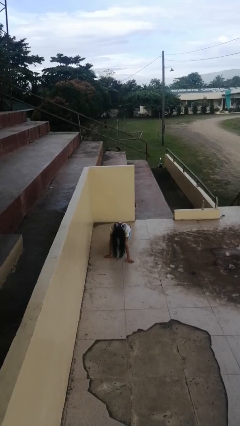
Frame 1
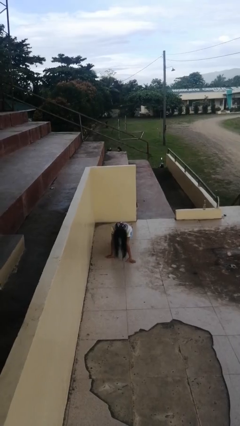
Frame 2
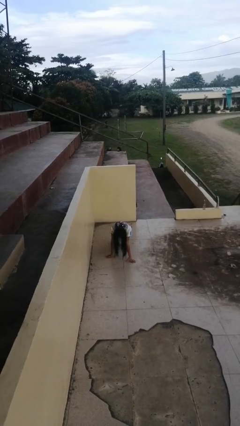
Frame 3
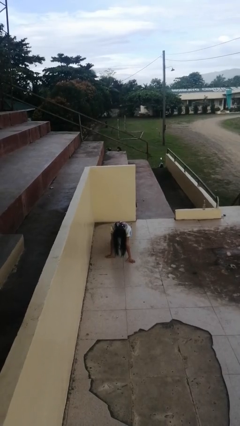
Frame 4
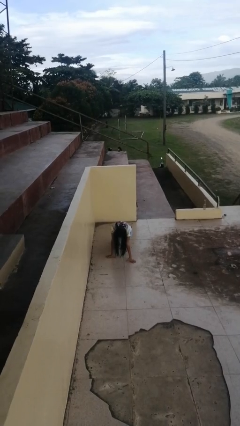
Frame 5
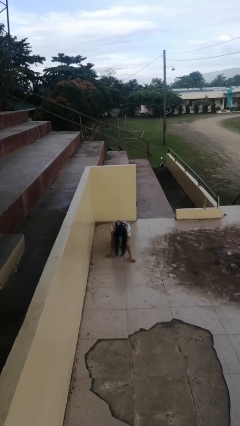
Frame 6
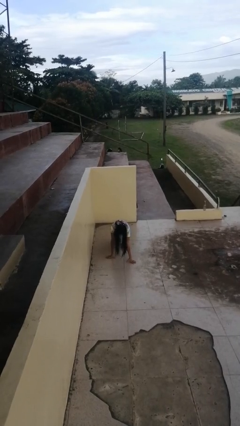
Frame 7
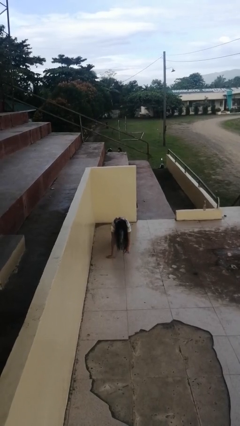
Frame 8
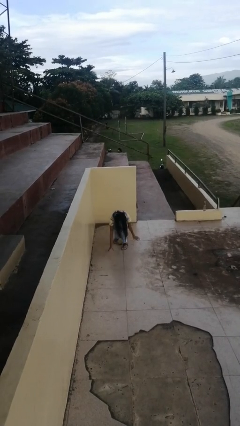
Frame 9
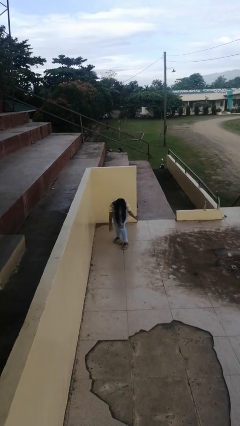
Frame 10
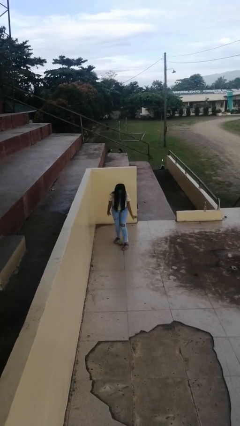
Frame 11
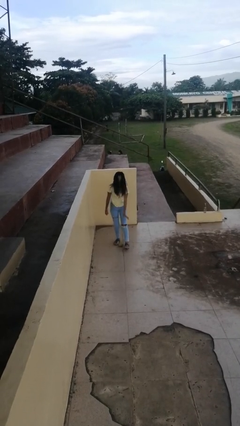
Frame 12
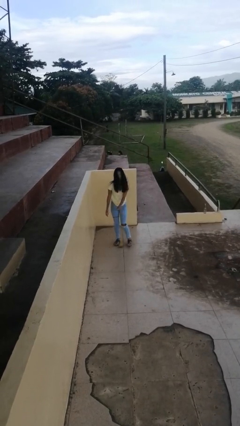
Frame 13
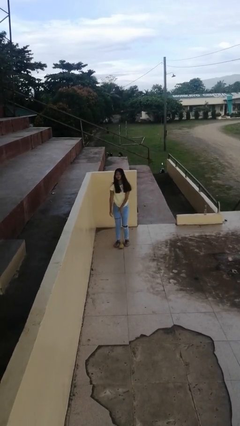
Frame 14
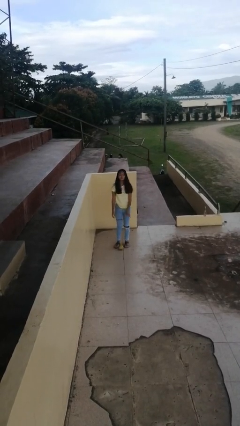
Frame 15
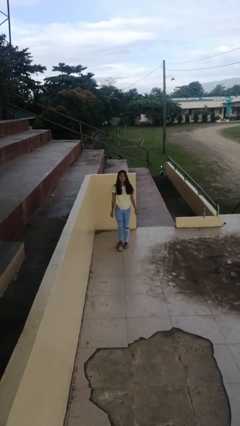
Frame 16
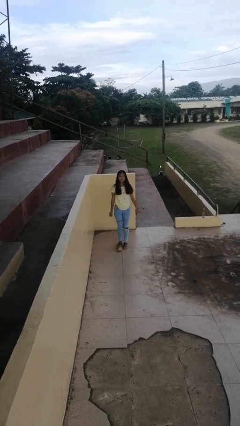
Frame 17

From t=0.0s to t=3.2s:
person stands up from floor

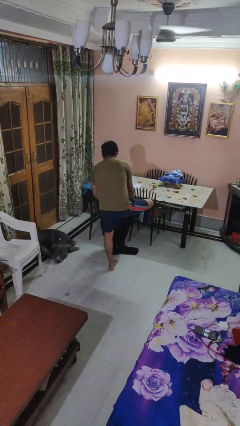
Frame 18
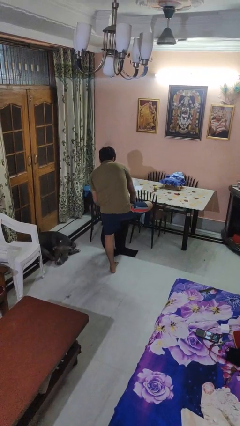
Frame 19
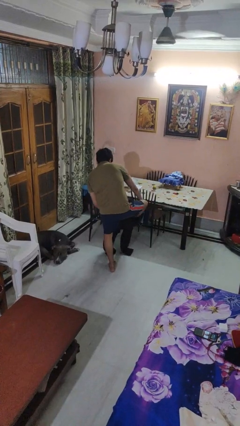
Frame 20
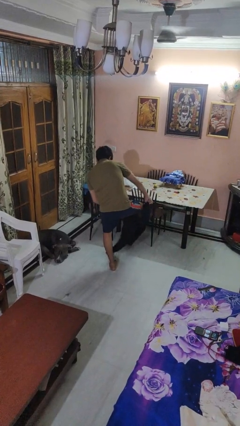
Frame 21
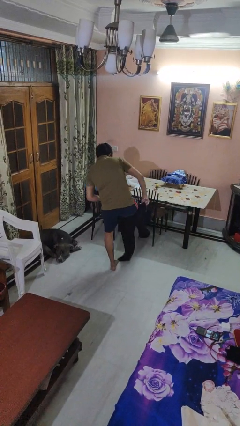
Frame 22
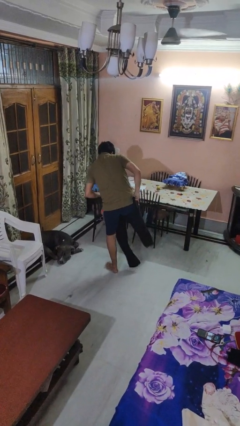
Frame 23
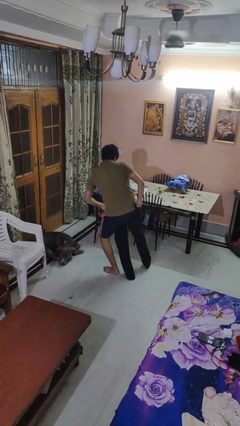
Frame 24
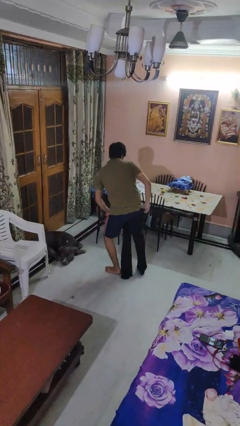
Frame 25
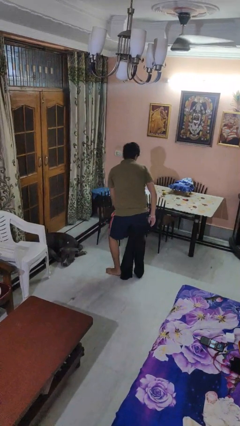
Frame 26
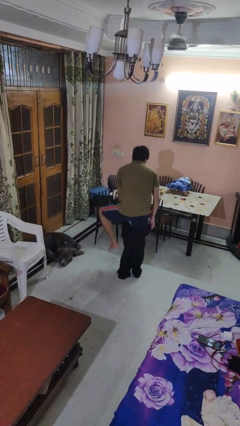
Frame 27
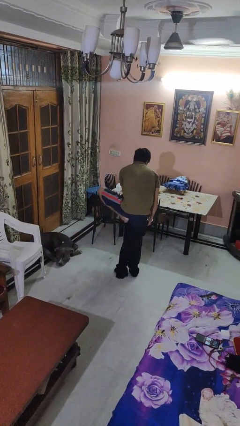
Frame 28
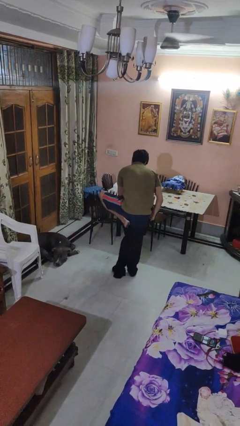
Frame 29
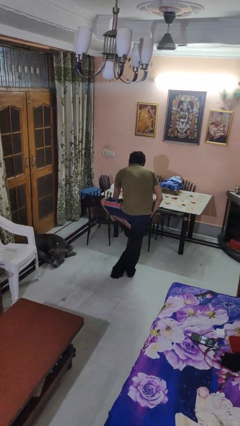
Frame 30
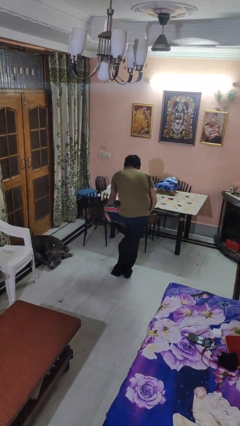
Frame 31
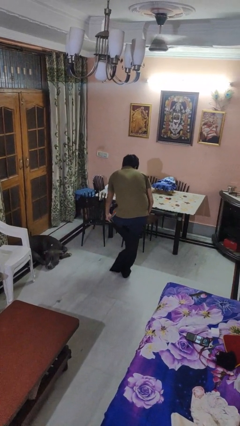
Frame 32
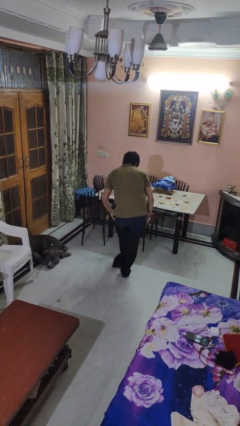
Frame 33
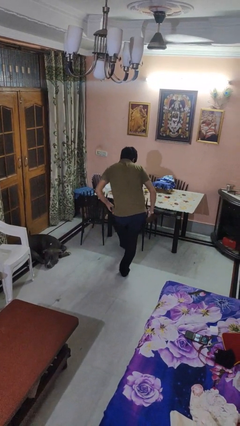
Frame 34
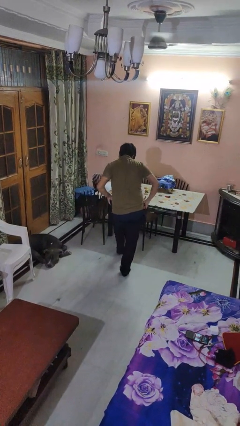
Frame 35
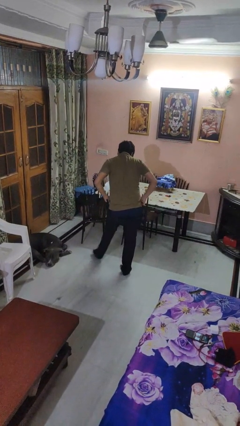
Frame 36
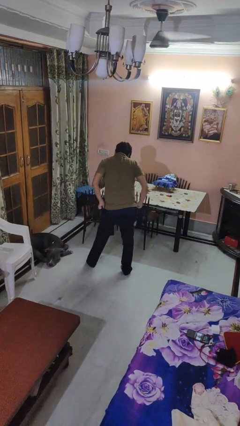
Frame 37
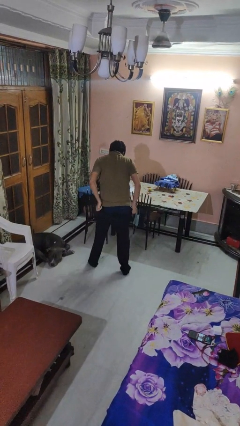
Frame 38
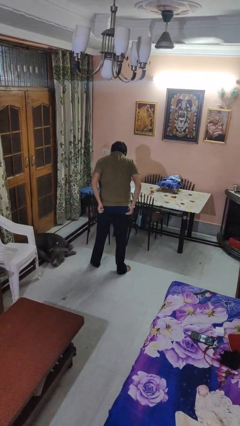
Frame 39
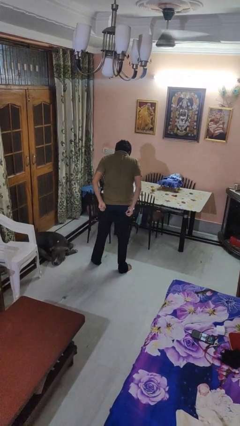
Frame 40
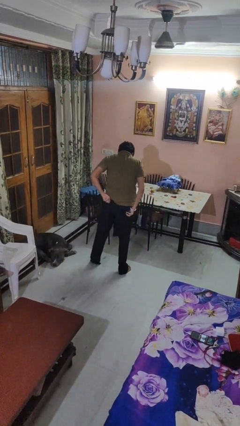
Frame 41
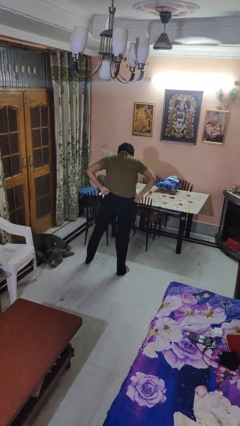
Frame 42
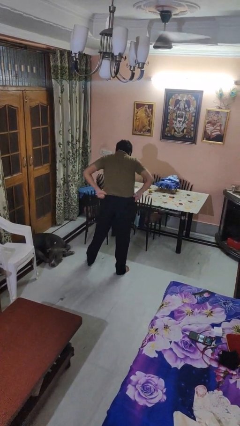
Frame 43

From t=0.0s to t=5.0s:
person puts on pants

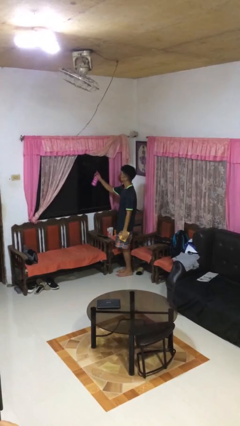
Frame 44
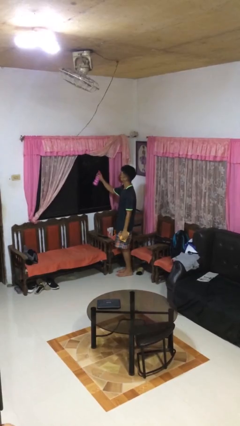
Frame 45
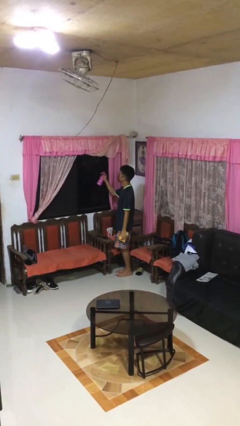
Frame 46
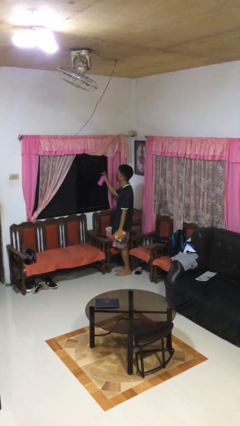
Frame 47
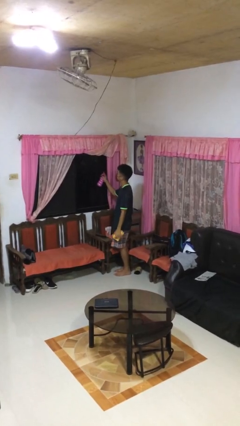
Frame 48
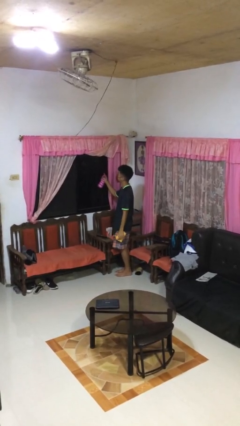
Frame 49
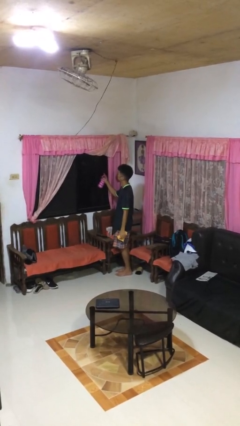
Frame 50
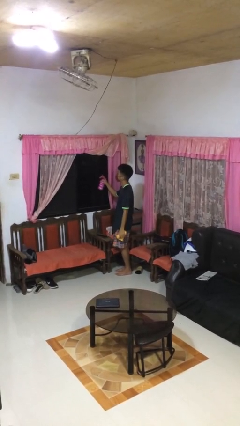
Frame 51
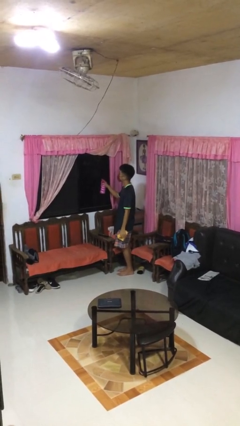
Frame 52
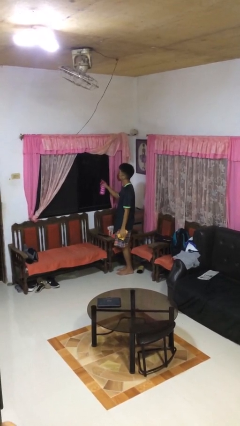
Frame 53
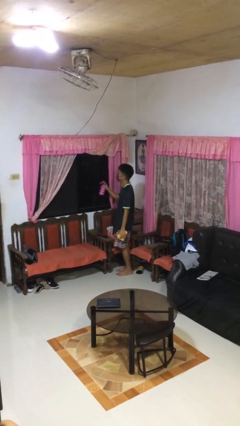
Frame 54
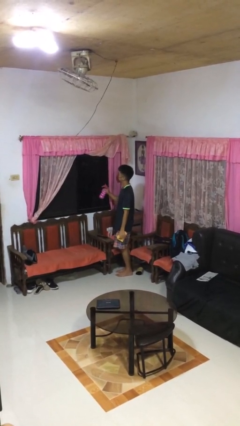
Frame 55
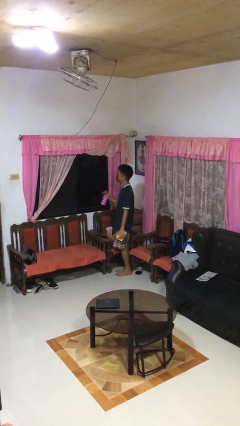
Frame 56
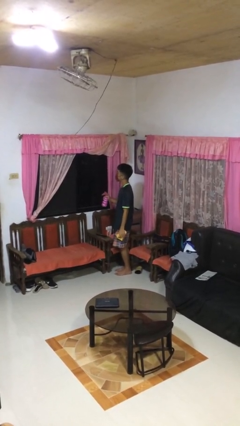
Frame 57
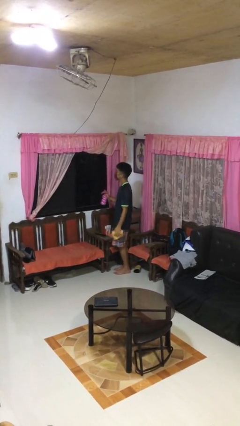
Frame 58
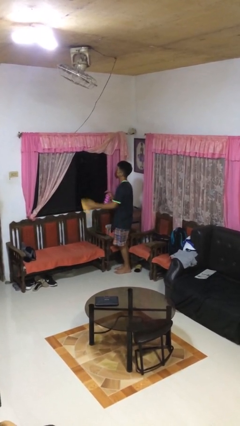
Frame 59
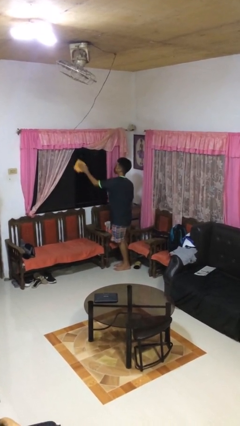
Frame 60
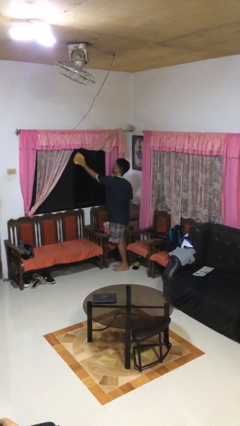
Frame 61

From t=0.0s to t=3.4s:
person sprays from bottle

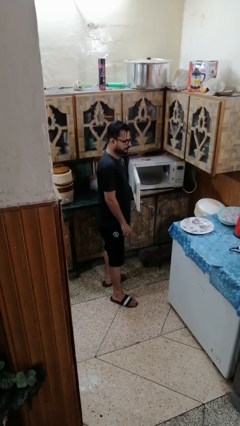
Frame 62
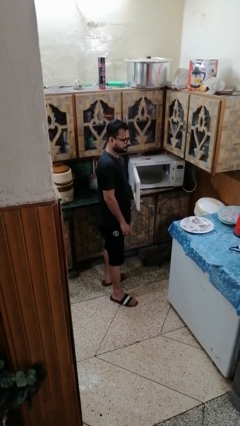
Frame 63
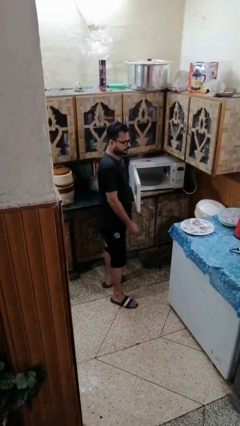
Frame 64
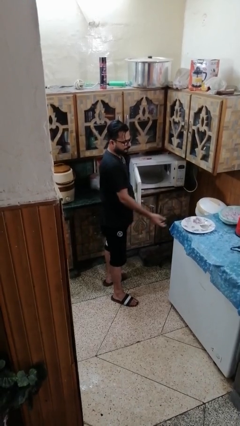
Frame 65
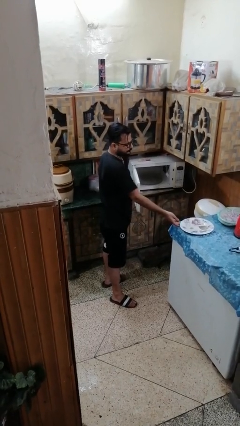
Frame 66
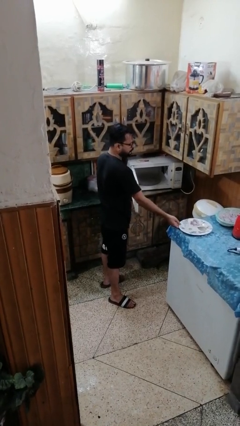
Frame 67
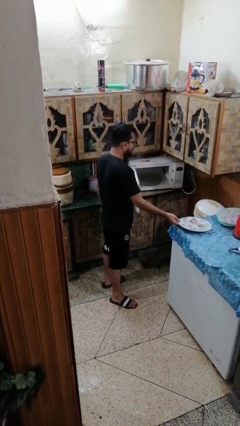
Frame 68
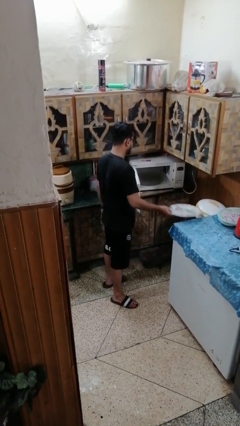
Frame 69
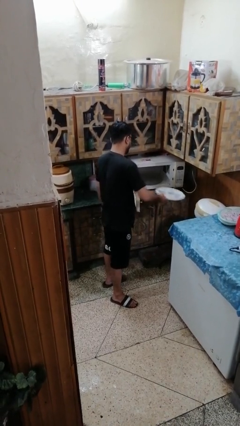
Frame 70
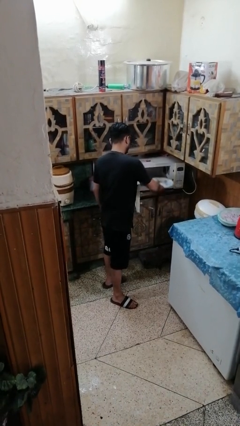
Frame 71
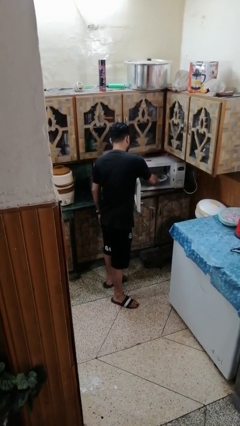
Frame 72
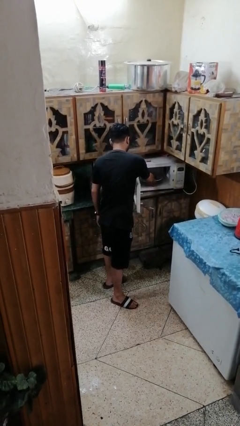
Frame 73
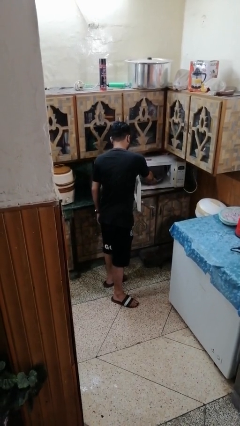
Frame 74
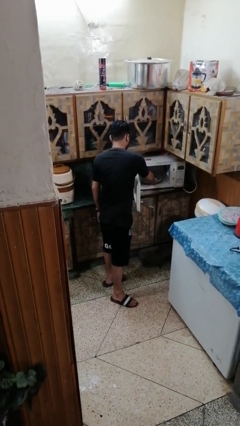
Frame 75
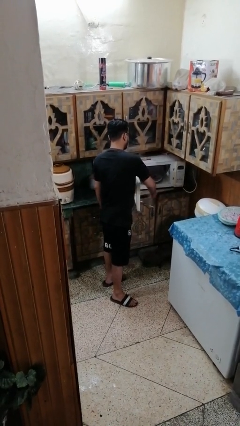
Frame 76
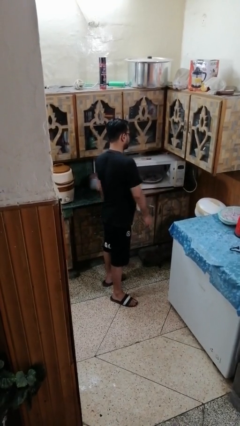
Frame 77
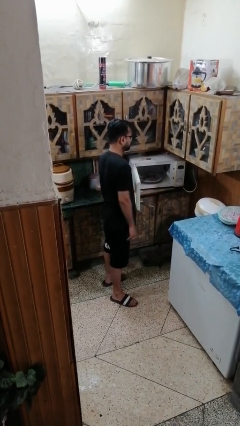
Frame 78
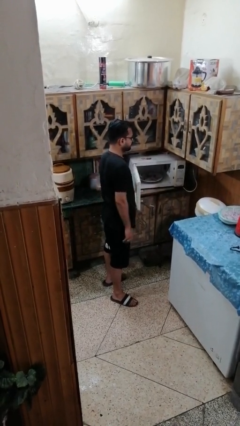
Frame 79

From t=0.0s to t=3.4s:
person puts object into microwave

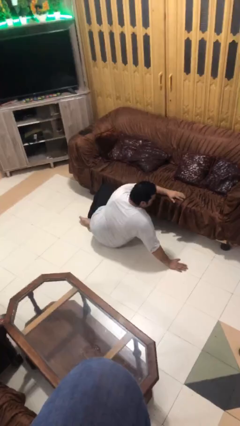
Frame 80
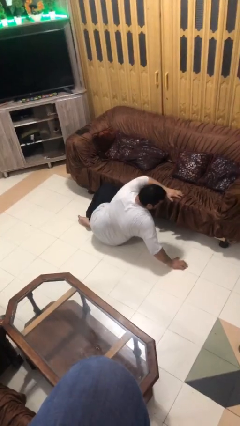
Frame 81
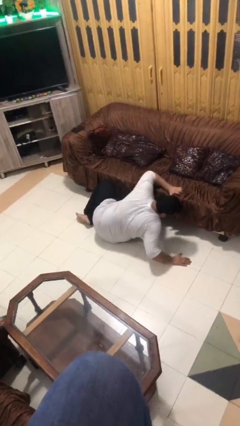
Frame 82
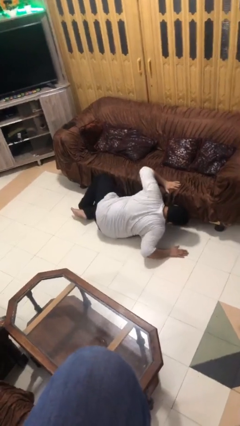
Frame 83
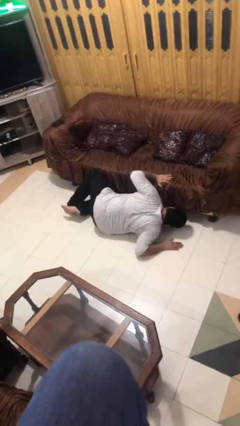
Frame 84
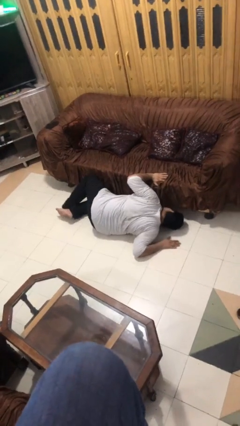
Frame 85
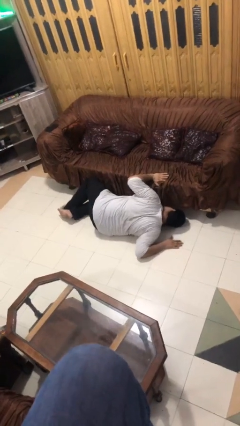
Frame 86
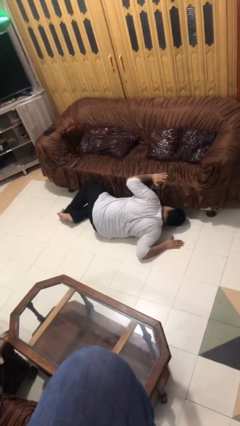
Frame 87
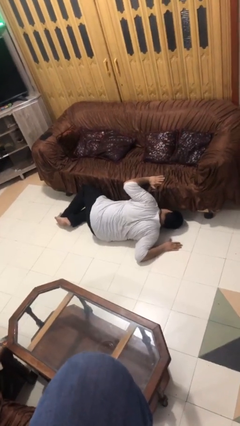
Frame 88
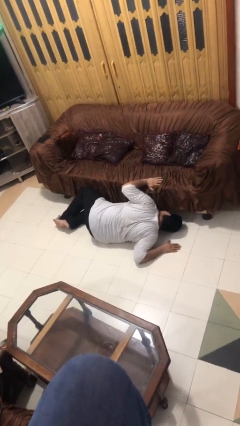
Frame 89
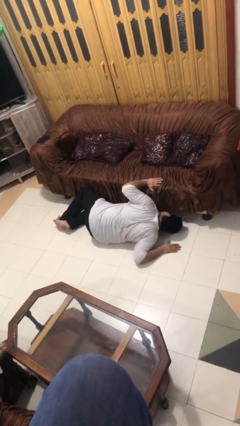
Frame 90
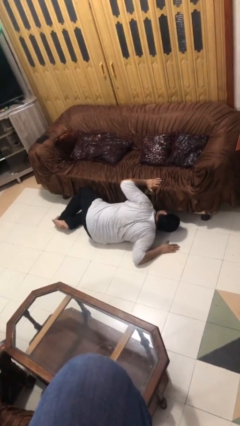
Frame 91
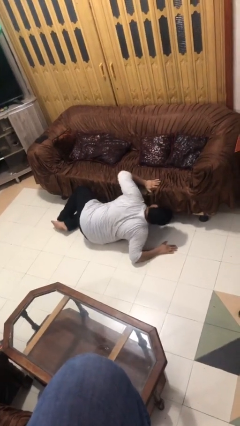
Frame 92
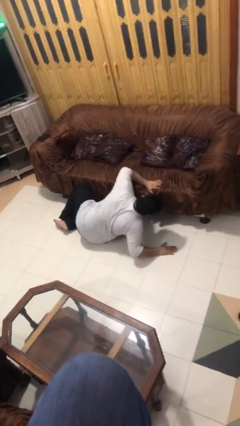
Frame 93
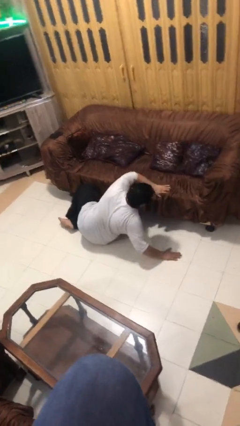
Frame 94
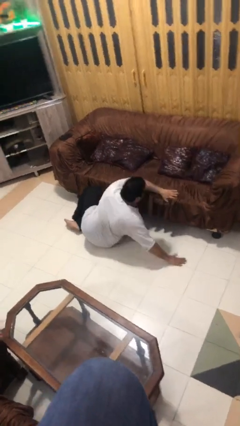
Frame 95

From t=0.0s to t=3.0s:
person searches under couch
